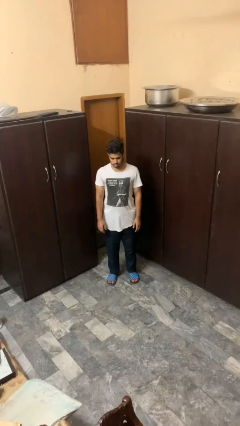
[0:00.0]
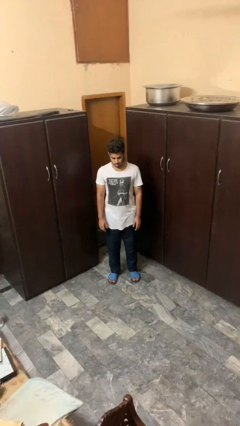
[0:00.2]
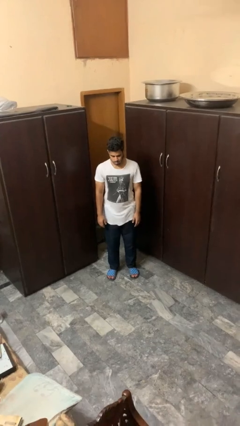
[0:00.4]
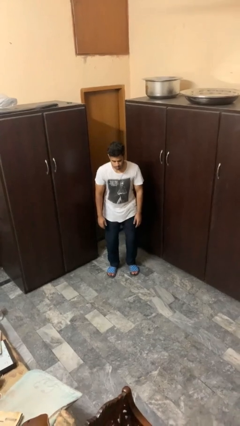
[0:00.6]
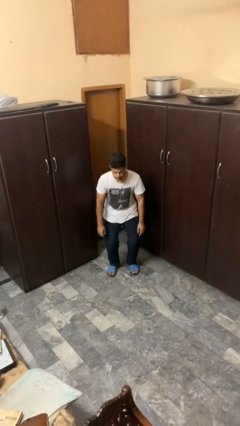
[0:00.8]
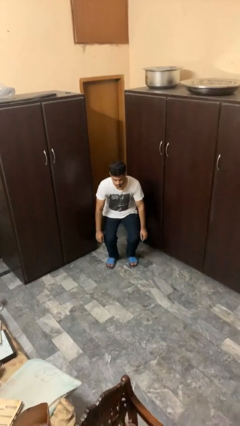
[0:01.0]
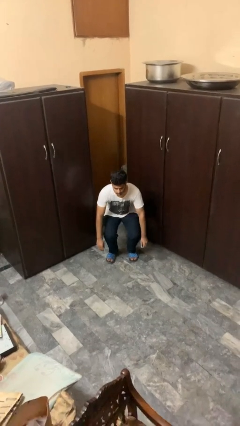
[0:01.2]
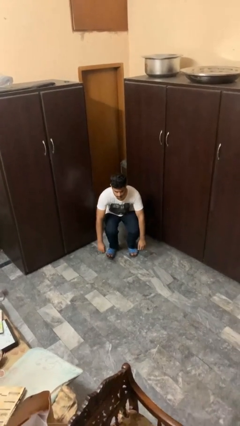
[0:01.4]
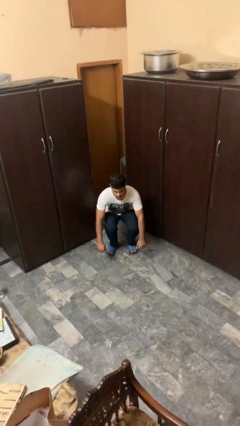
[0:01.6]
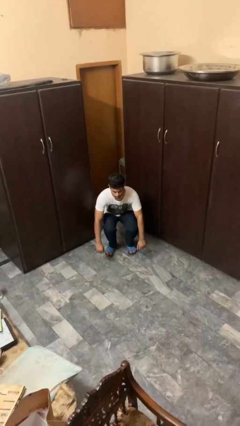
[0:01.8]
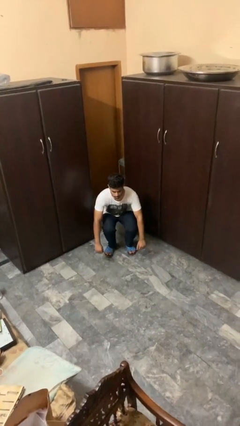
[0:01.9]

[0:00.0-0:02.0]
person squats

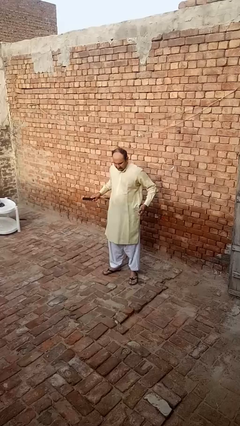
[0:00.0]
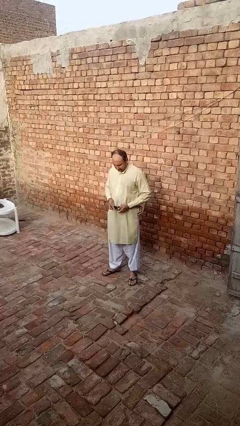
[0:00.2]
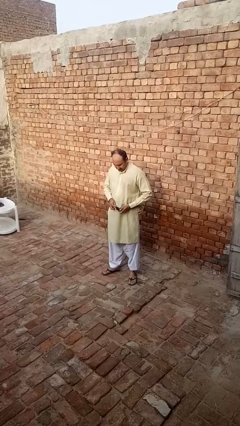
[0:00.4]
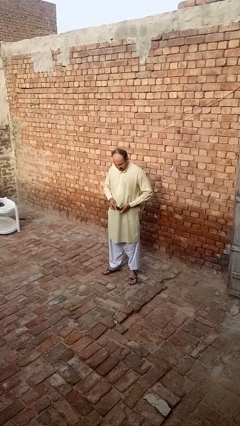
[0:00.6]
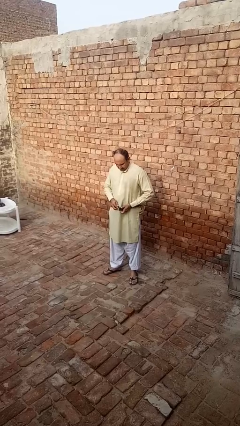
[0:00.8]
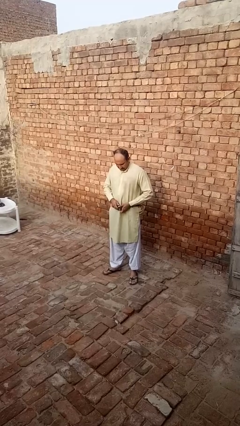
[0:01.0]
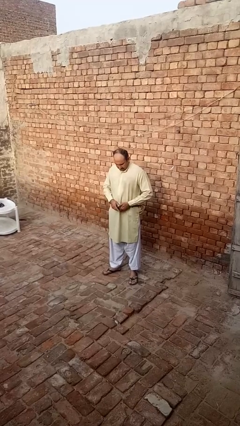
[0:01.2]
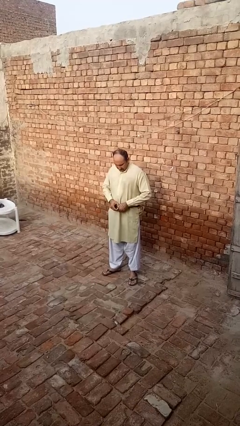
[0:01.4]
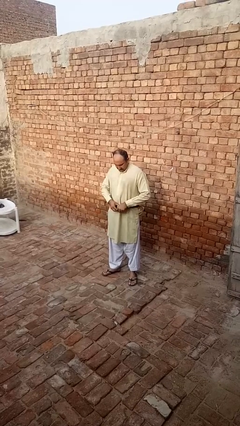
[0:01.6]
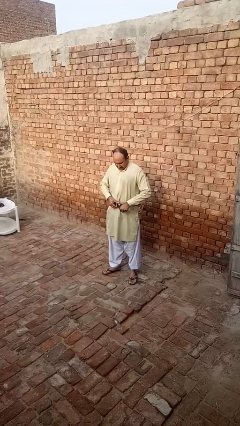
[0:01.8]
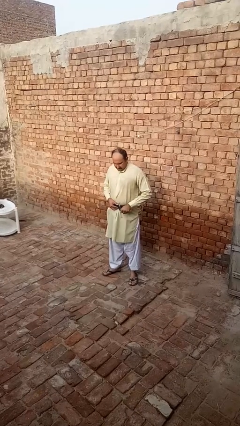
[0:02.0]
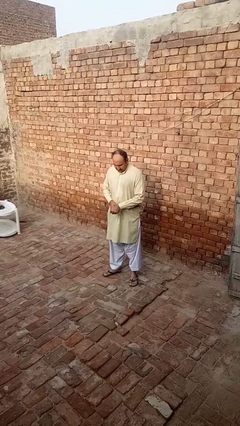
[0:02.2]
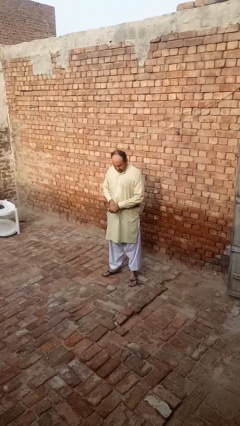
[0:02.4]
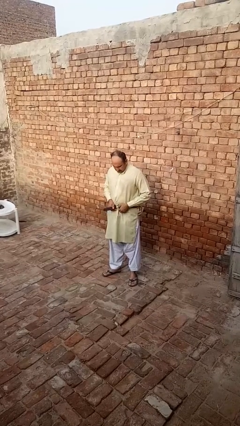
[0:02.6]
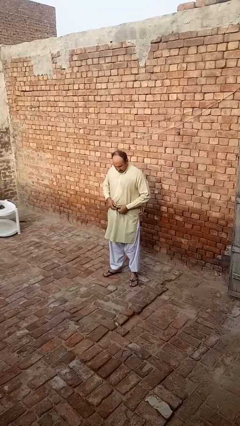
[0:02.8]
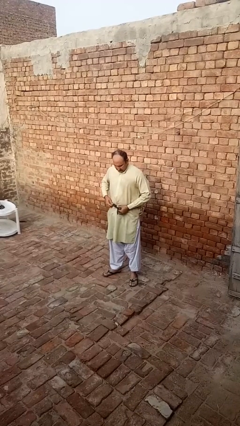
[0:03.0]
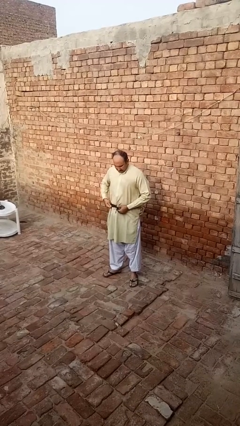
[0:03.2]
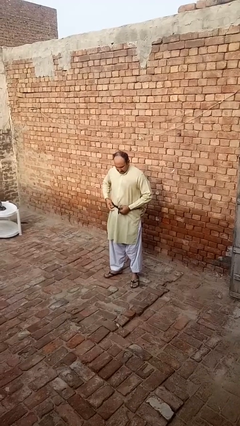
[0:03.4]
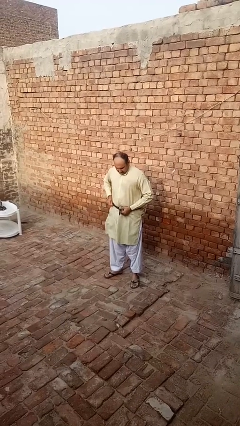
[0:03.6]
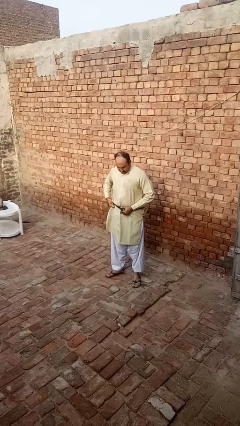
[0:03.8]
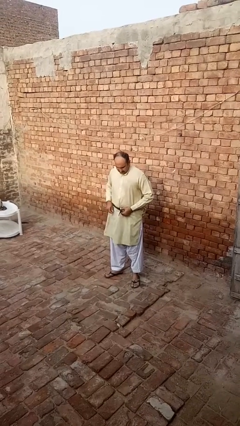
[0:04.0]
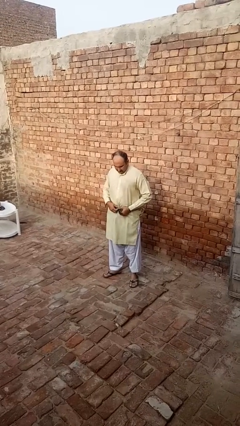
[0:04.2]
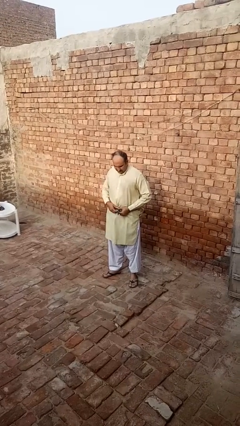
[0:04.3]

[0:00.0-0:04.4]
person puts on belt

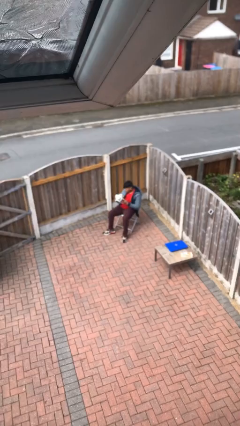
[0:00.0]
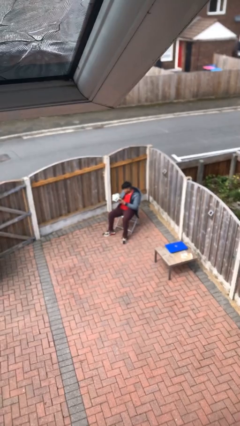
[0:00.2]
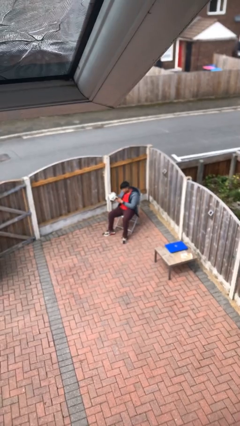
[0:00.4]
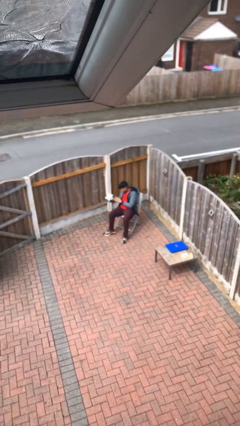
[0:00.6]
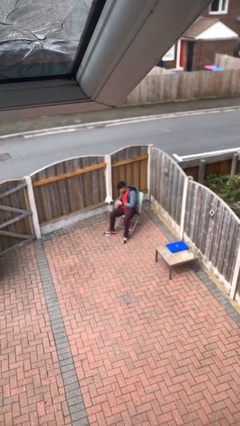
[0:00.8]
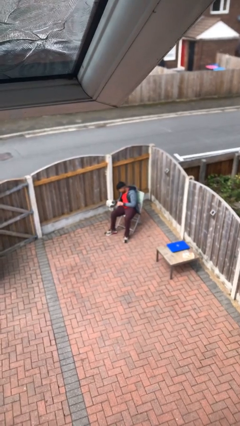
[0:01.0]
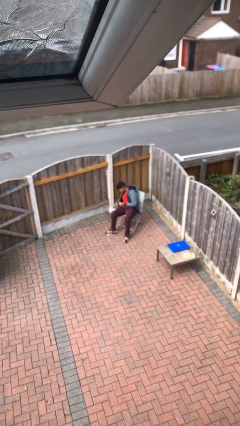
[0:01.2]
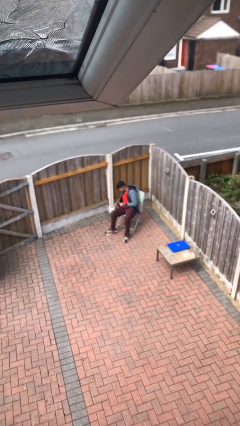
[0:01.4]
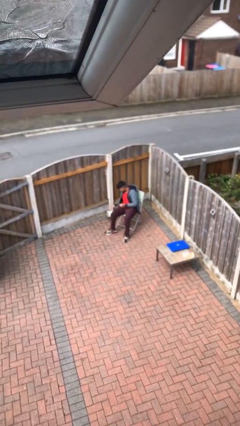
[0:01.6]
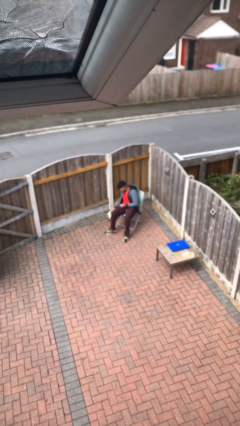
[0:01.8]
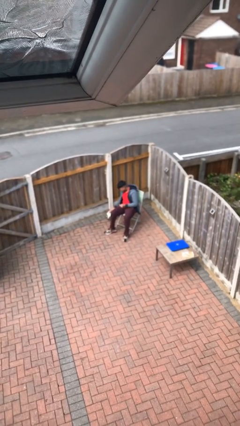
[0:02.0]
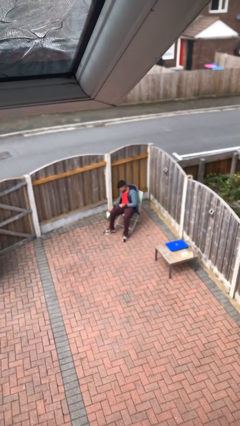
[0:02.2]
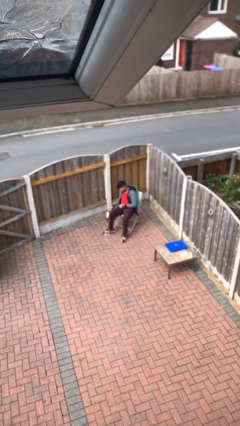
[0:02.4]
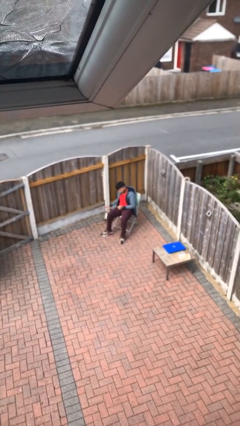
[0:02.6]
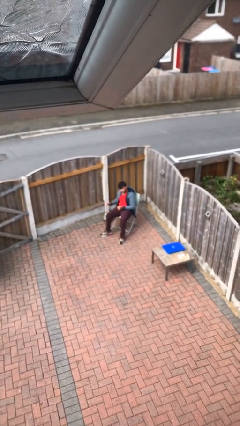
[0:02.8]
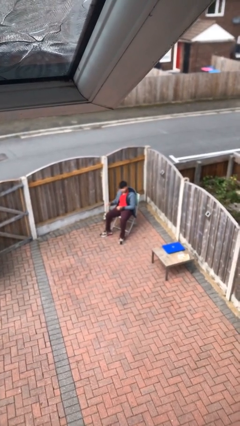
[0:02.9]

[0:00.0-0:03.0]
person puts down object on floor

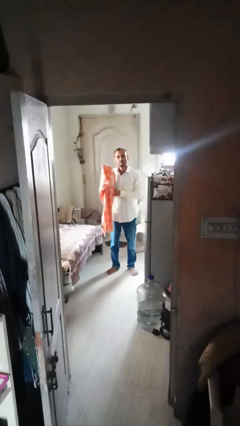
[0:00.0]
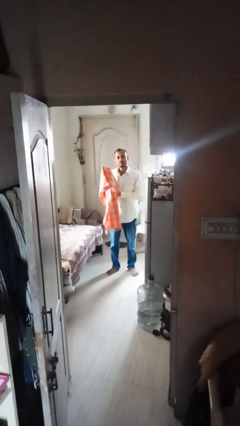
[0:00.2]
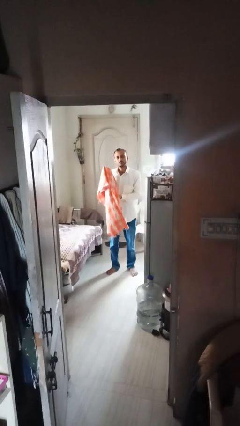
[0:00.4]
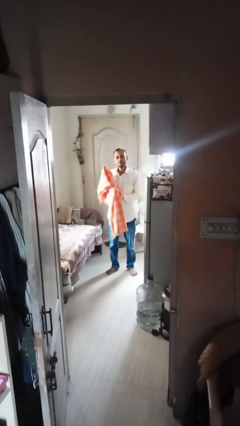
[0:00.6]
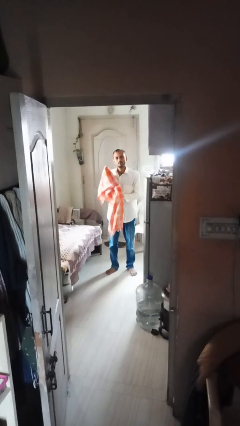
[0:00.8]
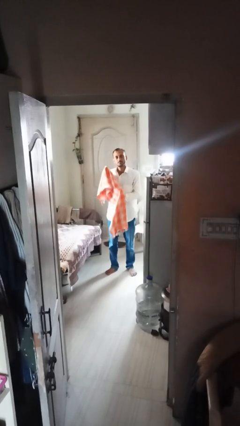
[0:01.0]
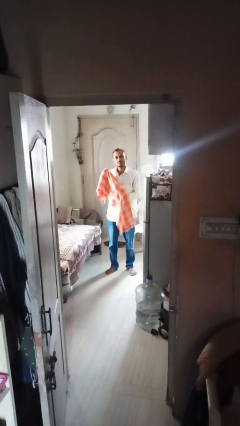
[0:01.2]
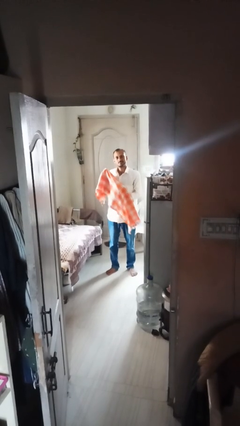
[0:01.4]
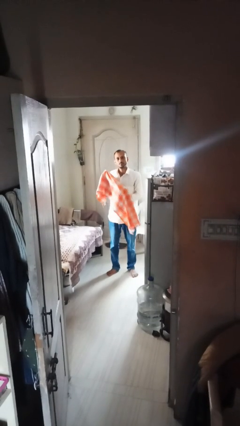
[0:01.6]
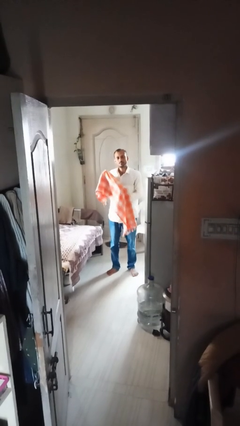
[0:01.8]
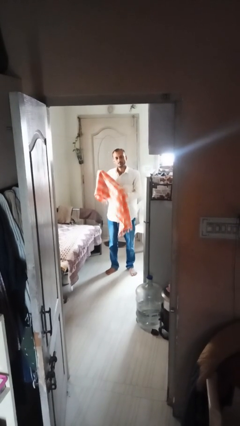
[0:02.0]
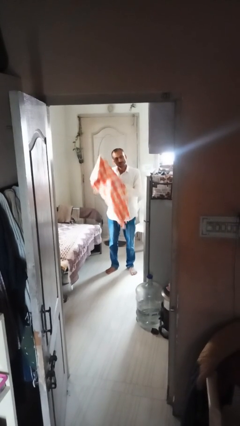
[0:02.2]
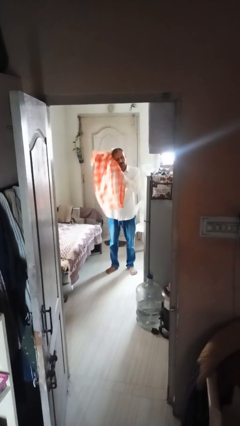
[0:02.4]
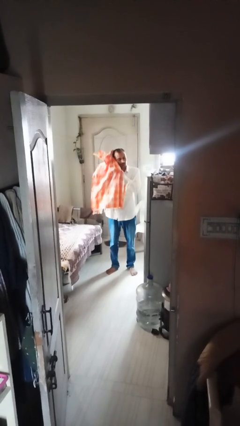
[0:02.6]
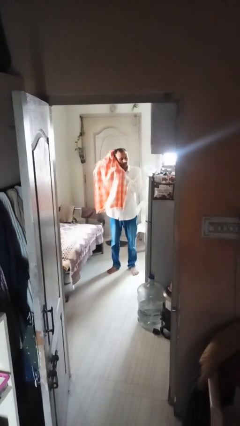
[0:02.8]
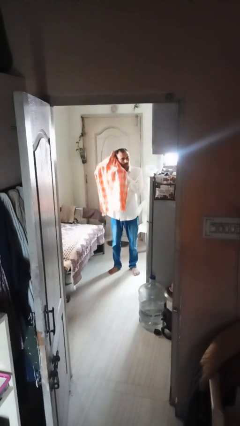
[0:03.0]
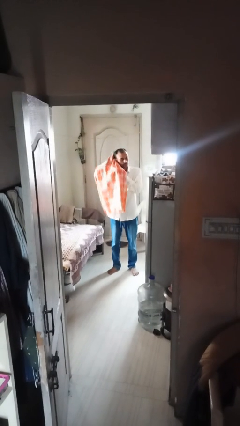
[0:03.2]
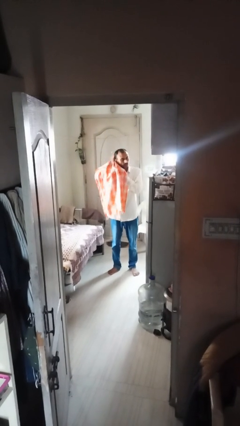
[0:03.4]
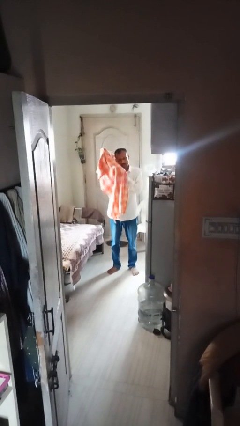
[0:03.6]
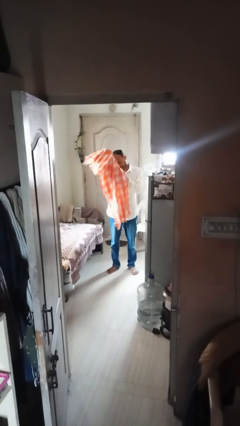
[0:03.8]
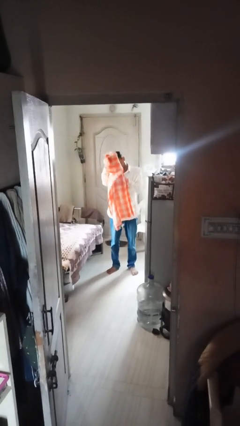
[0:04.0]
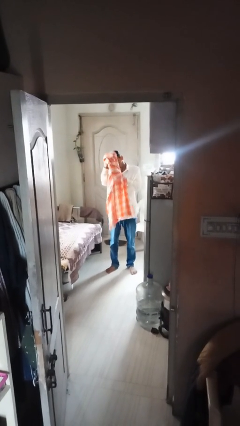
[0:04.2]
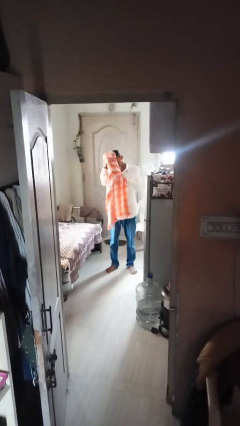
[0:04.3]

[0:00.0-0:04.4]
person dries hair with towel

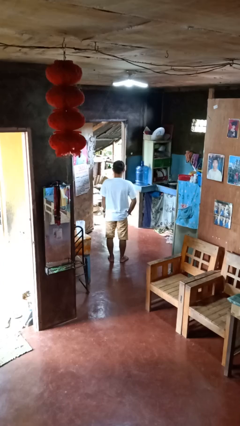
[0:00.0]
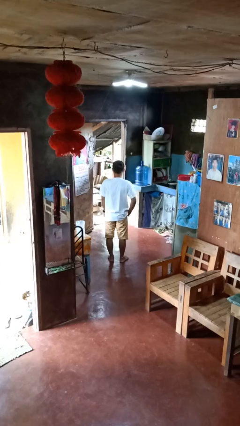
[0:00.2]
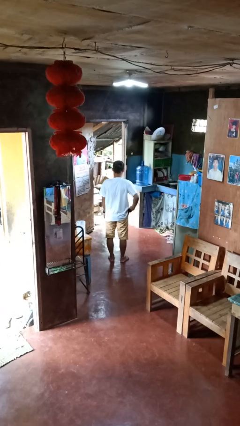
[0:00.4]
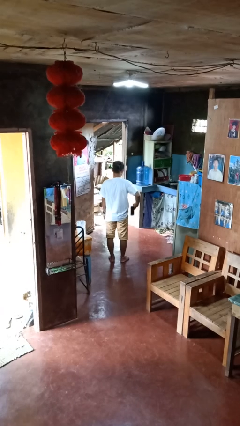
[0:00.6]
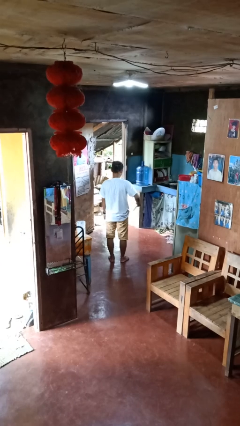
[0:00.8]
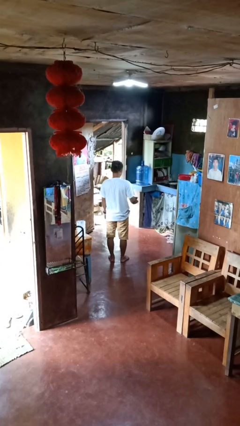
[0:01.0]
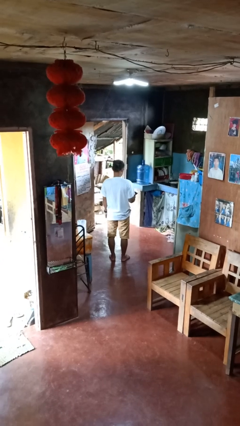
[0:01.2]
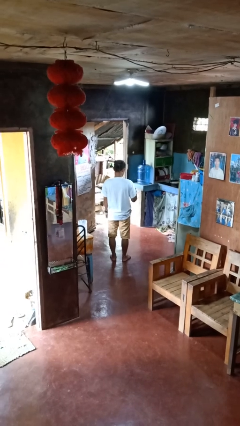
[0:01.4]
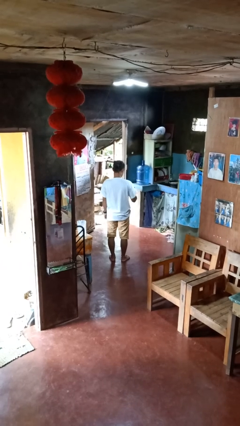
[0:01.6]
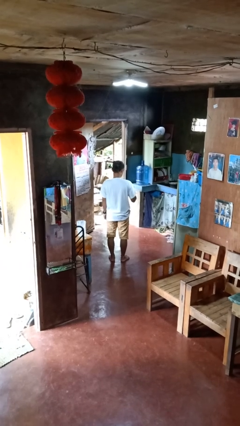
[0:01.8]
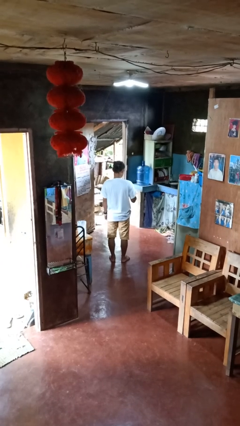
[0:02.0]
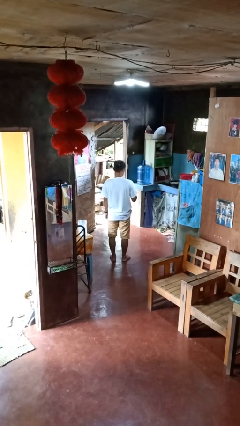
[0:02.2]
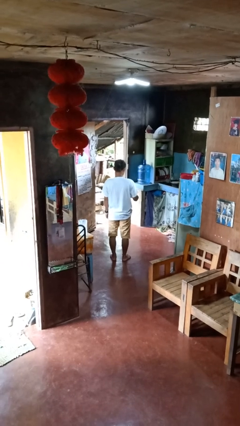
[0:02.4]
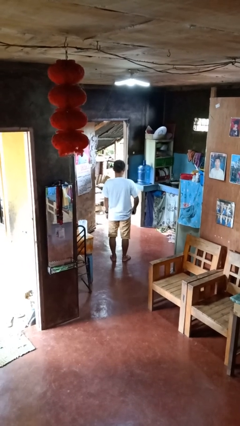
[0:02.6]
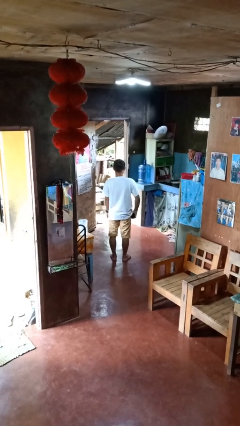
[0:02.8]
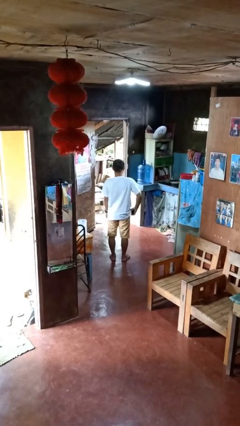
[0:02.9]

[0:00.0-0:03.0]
person takes phone from pocket

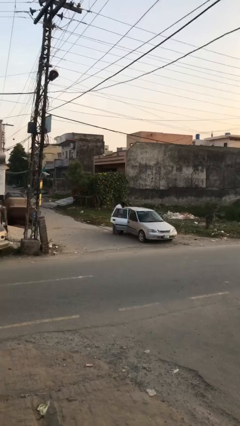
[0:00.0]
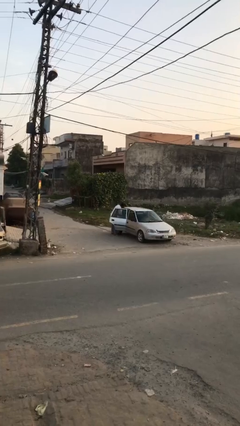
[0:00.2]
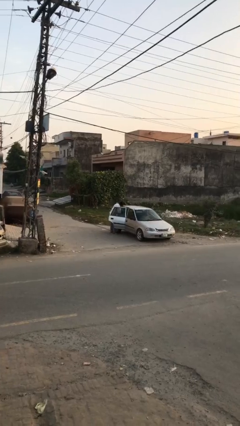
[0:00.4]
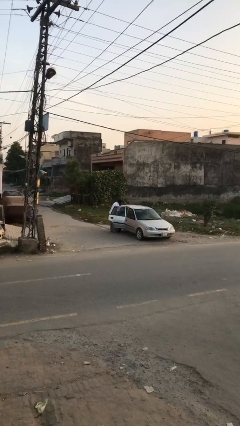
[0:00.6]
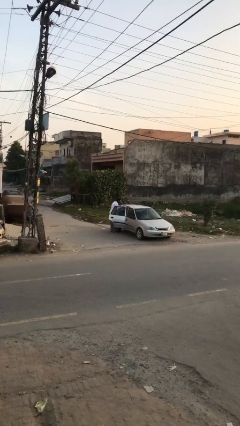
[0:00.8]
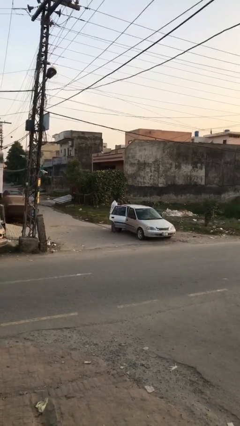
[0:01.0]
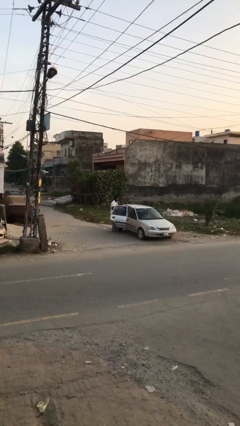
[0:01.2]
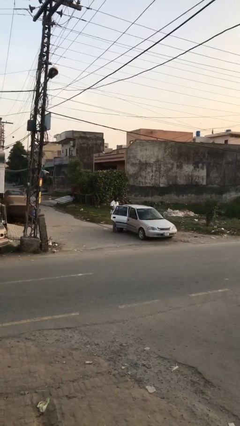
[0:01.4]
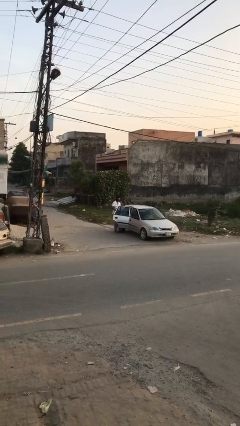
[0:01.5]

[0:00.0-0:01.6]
person unloads car
